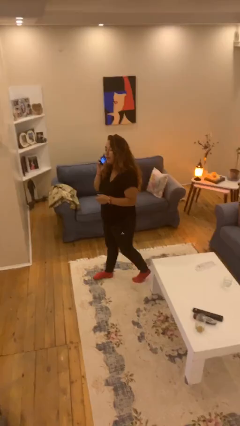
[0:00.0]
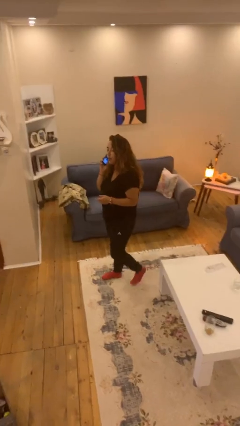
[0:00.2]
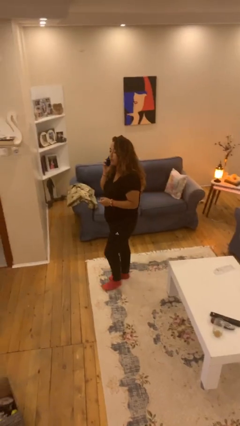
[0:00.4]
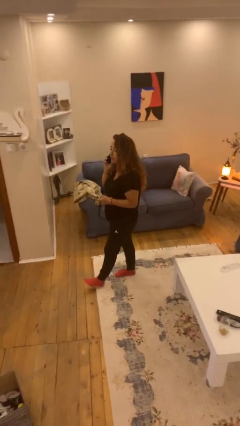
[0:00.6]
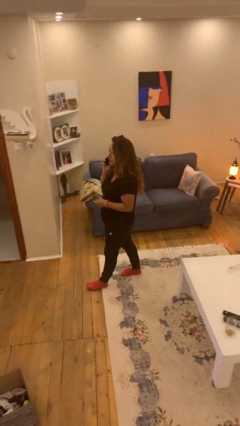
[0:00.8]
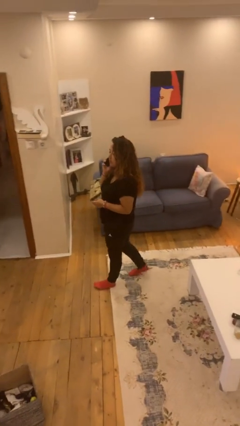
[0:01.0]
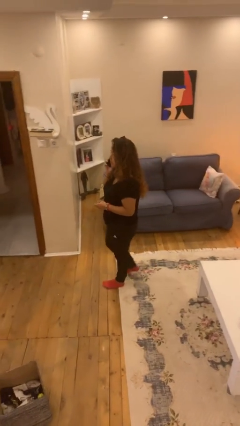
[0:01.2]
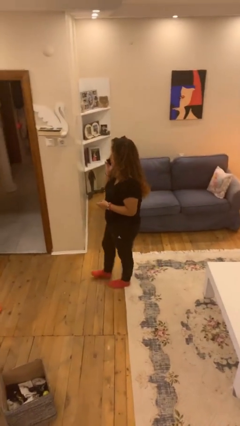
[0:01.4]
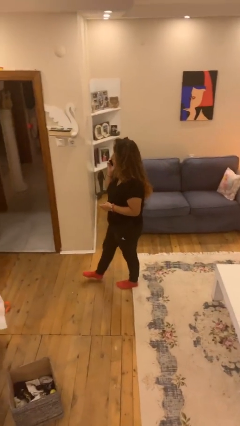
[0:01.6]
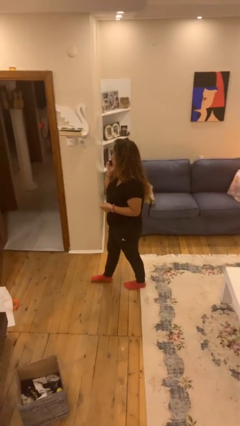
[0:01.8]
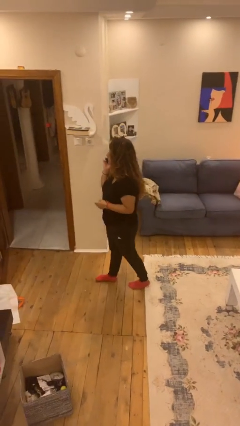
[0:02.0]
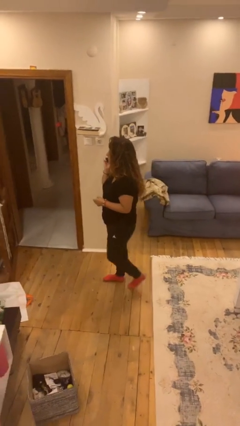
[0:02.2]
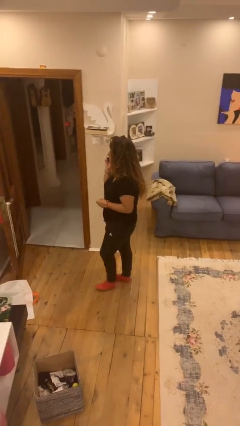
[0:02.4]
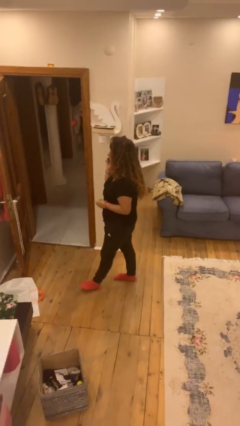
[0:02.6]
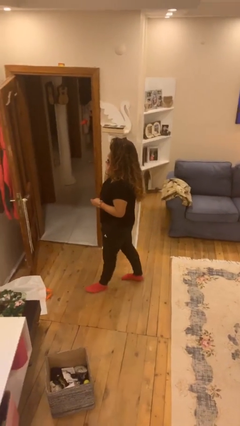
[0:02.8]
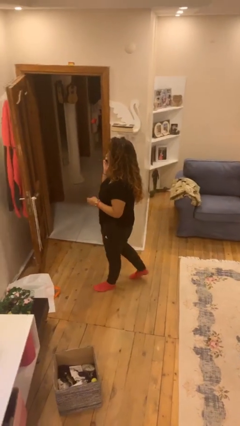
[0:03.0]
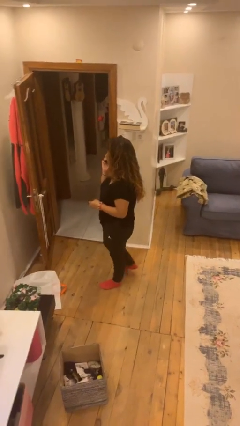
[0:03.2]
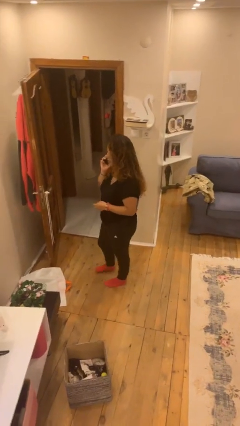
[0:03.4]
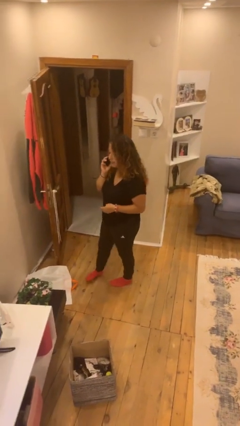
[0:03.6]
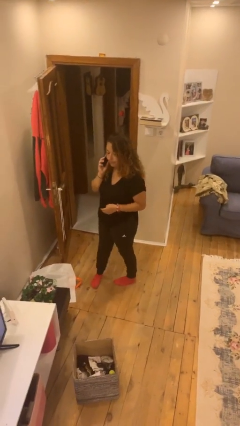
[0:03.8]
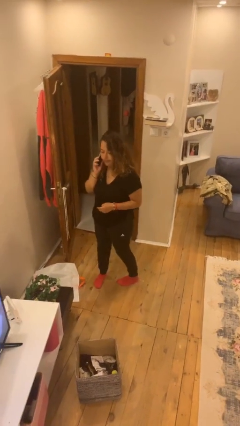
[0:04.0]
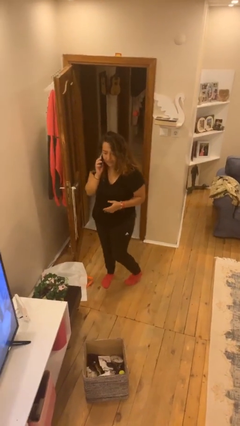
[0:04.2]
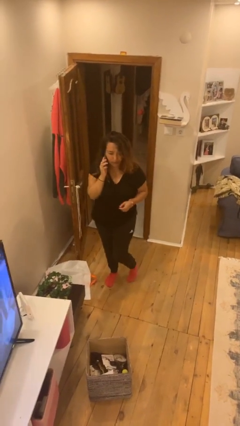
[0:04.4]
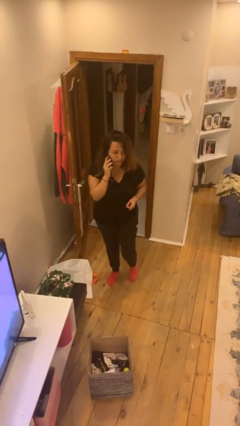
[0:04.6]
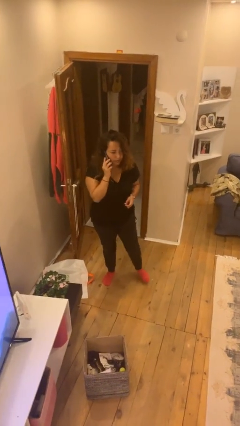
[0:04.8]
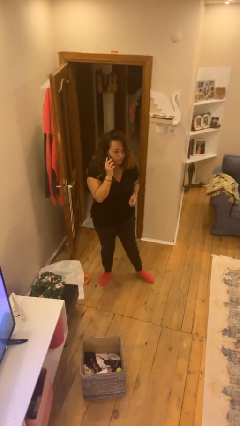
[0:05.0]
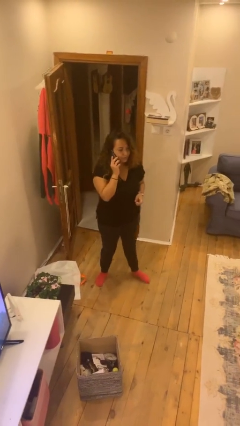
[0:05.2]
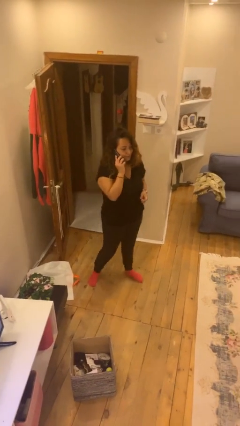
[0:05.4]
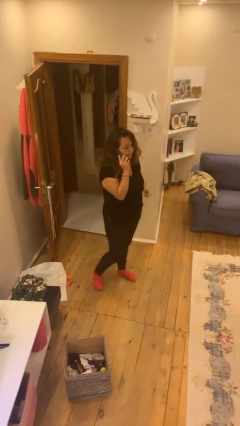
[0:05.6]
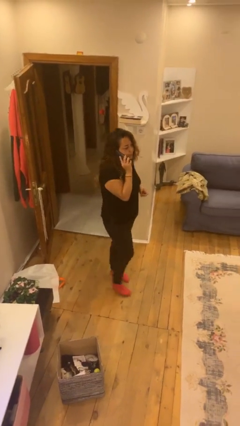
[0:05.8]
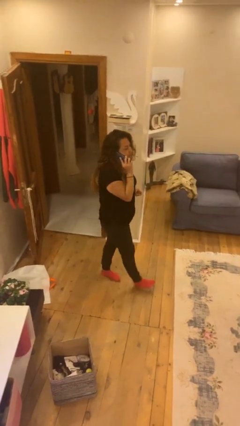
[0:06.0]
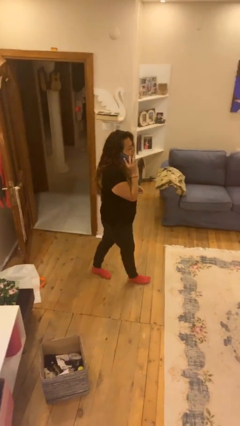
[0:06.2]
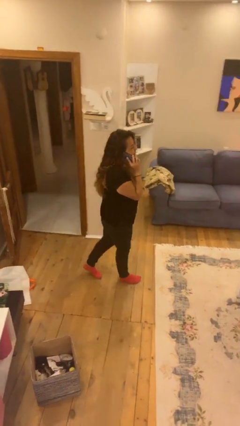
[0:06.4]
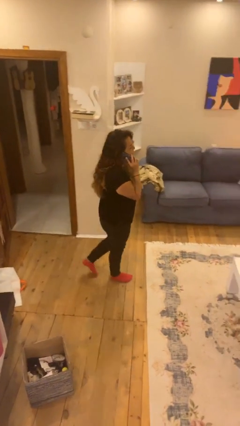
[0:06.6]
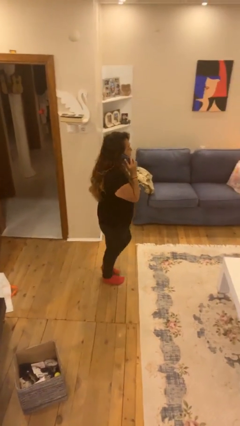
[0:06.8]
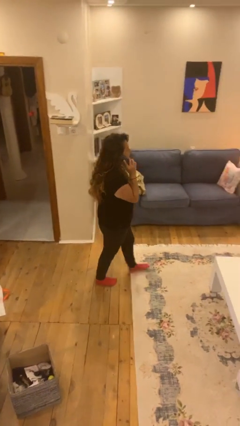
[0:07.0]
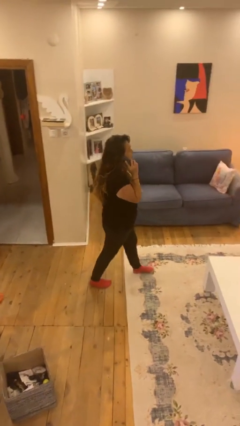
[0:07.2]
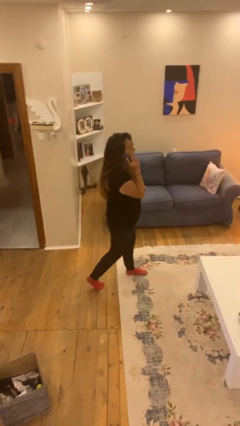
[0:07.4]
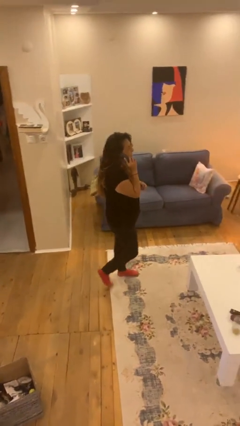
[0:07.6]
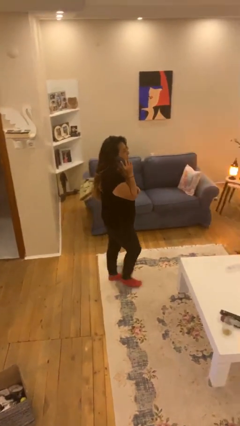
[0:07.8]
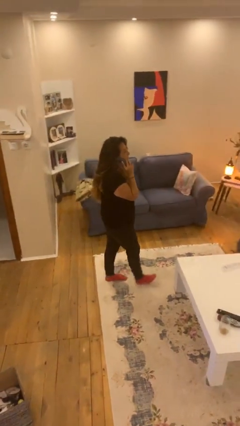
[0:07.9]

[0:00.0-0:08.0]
person talks on phone

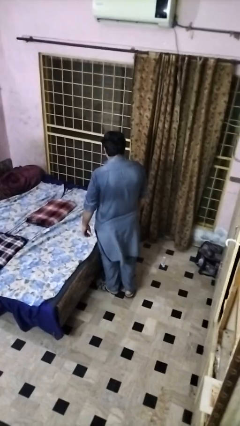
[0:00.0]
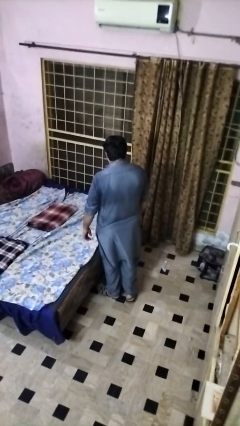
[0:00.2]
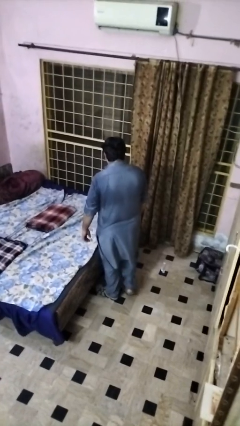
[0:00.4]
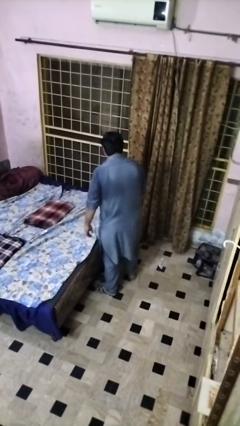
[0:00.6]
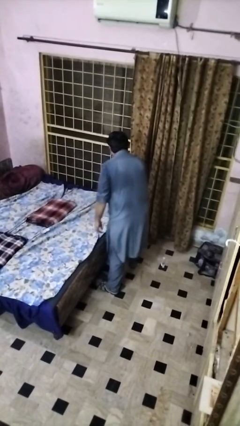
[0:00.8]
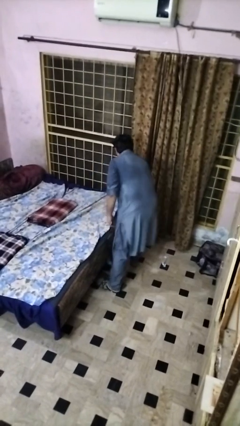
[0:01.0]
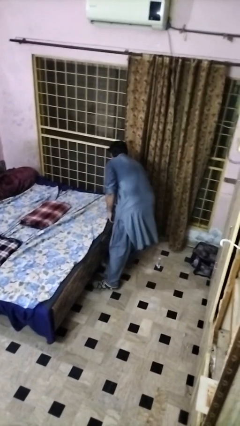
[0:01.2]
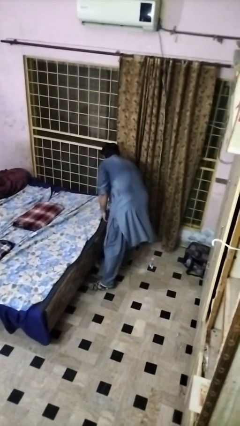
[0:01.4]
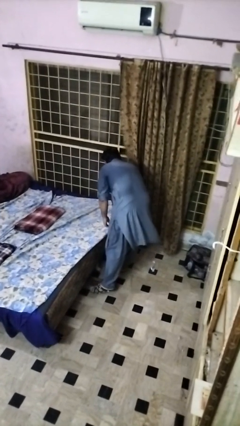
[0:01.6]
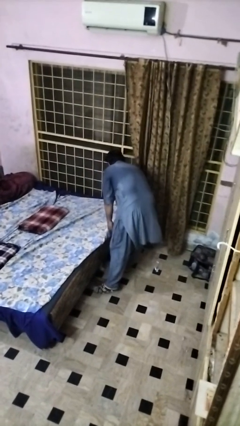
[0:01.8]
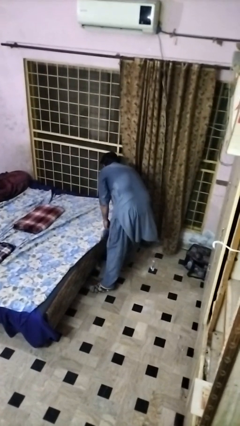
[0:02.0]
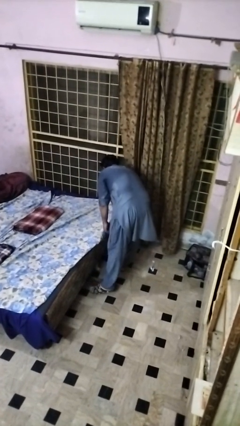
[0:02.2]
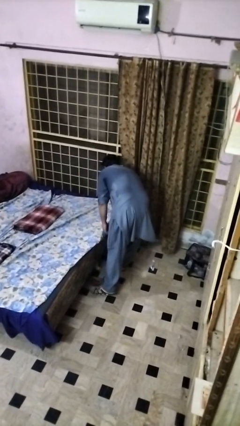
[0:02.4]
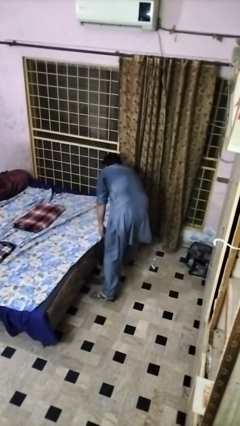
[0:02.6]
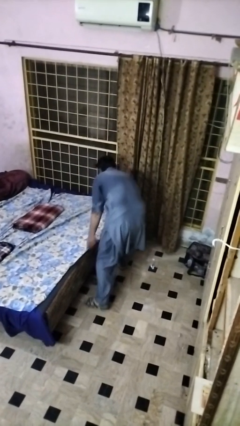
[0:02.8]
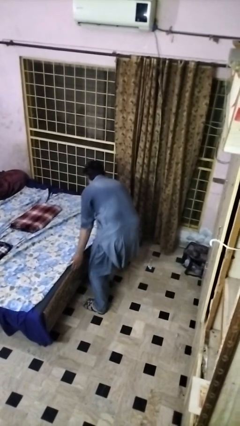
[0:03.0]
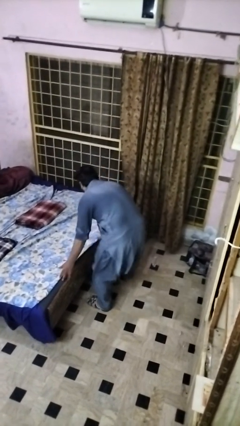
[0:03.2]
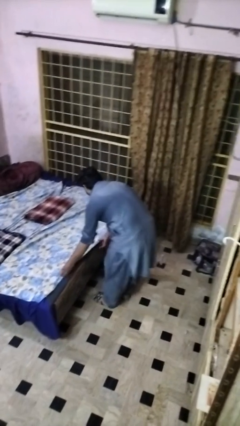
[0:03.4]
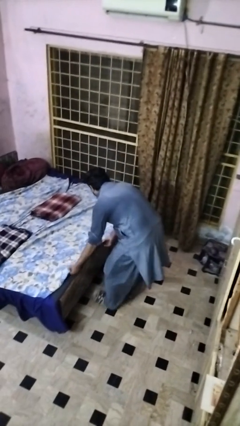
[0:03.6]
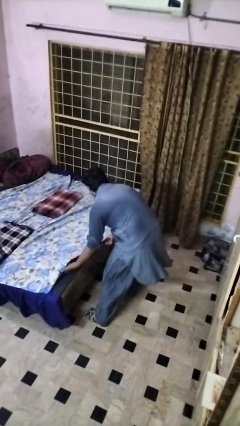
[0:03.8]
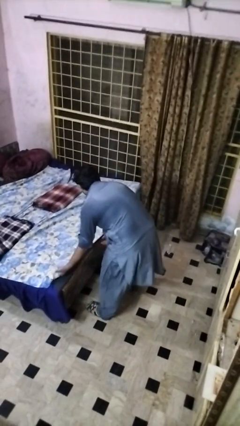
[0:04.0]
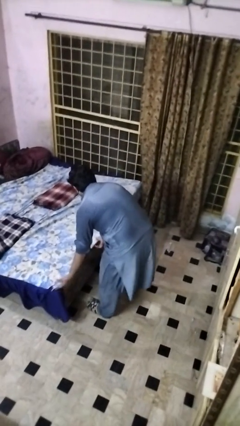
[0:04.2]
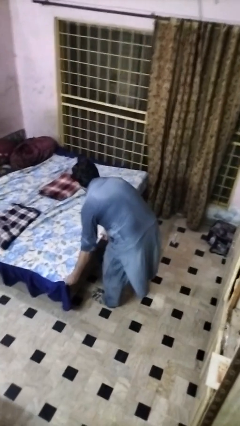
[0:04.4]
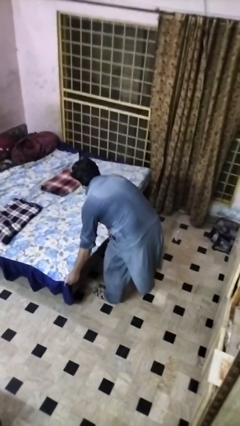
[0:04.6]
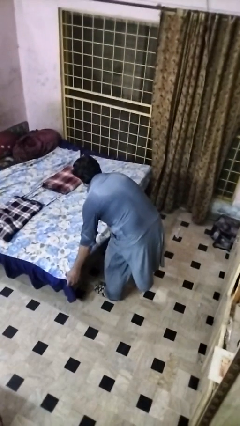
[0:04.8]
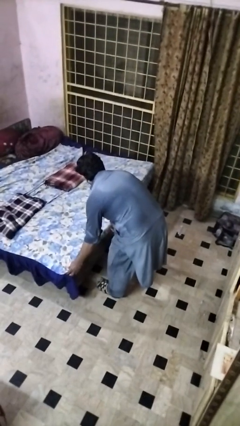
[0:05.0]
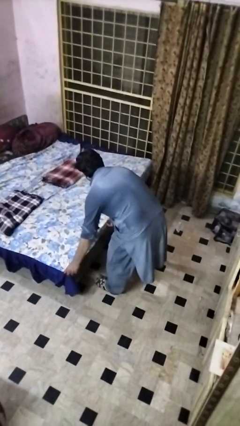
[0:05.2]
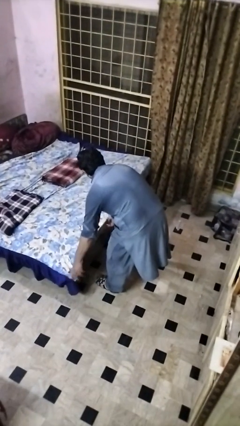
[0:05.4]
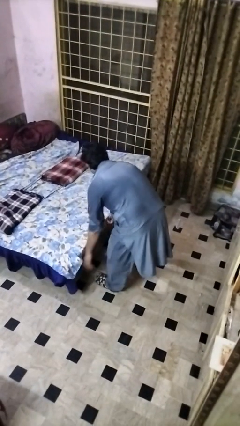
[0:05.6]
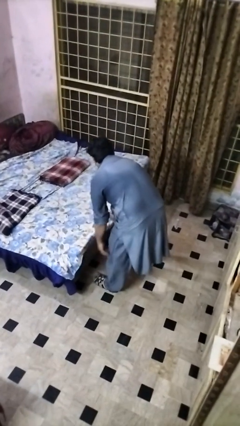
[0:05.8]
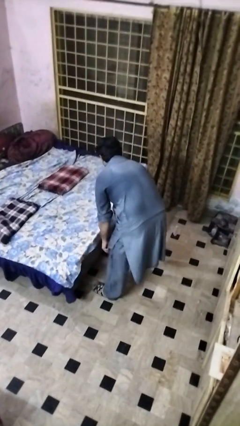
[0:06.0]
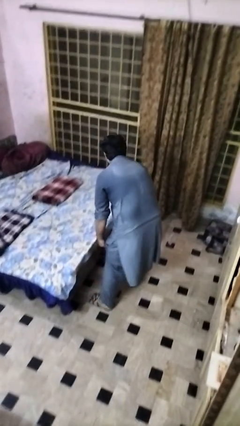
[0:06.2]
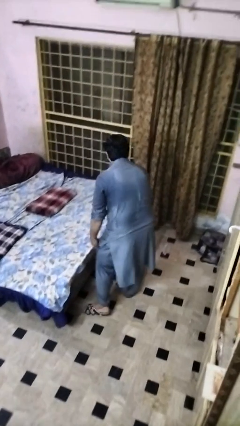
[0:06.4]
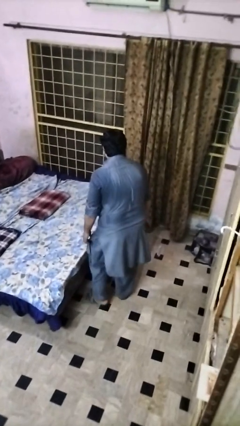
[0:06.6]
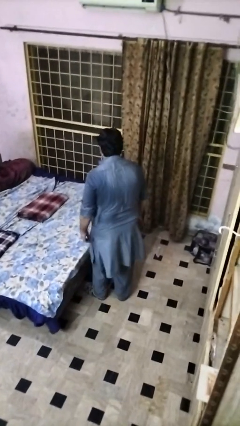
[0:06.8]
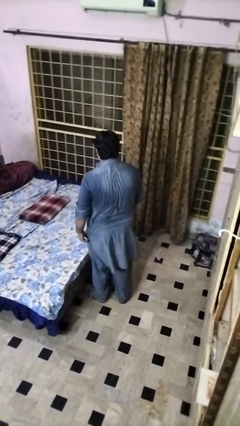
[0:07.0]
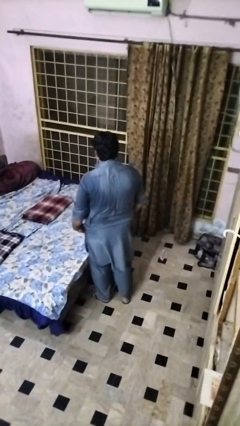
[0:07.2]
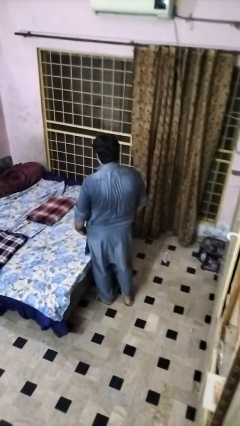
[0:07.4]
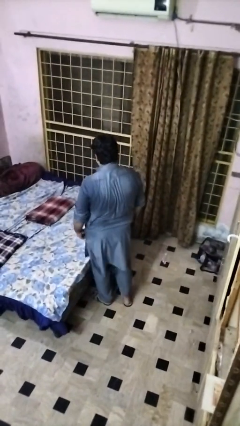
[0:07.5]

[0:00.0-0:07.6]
person makes bed

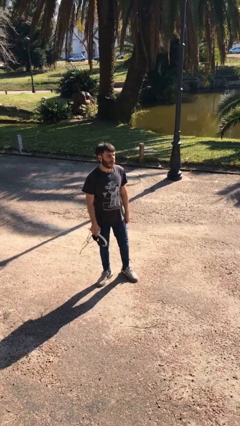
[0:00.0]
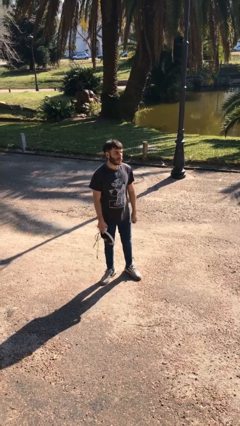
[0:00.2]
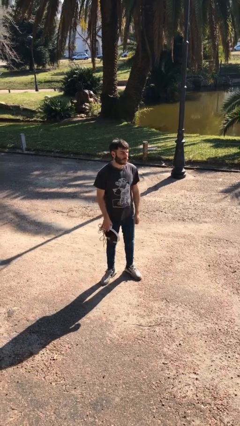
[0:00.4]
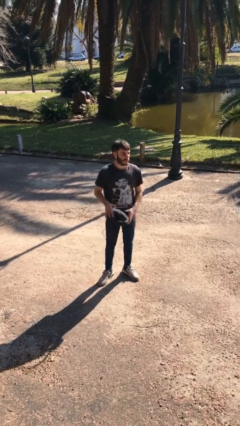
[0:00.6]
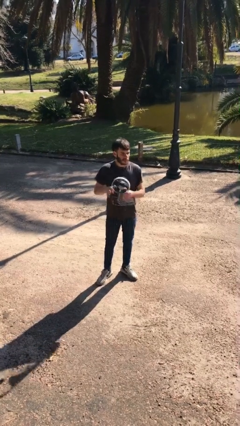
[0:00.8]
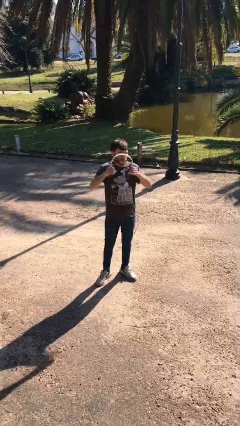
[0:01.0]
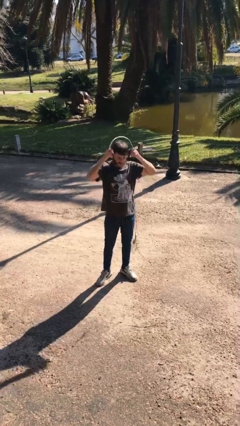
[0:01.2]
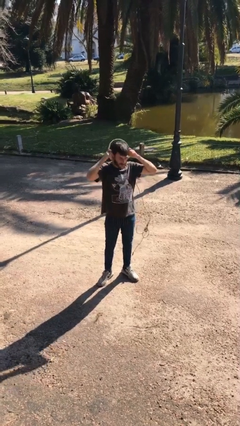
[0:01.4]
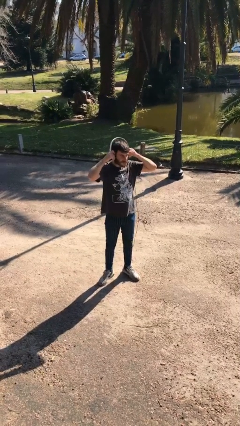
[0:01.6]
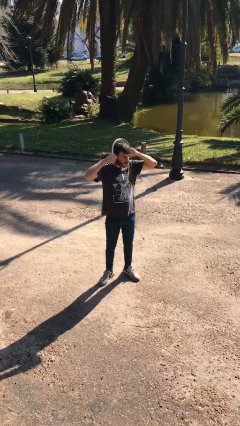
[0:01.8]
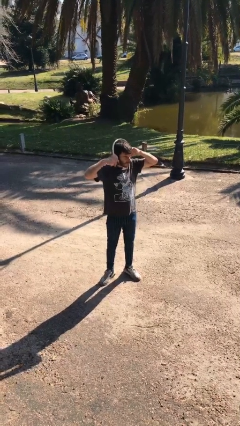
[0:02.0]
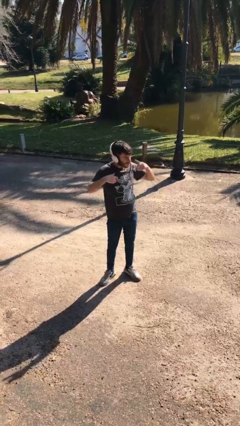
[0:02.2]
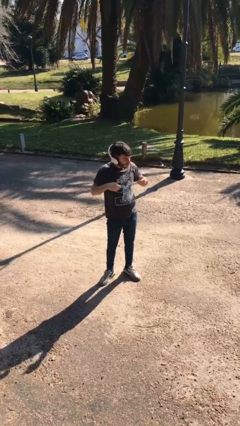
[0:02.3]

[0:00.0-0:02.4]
person puts on headphones
